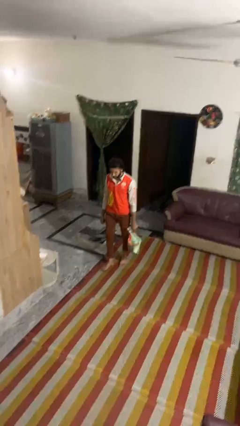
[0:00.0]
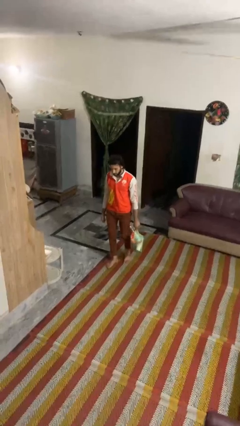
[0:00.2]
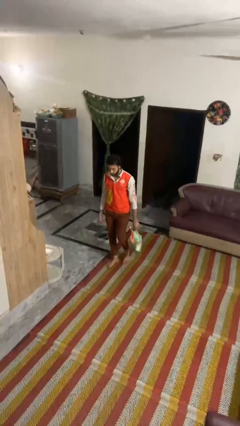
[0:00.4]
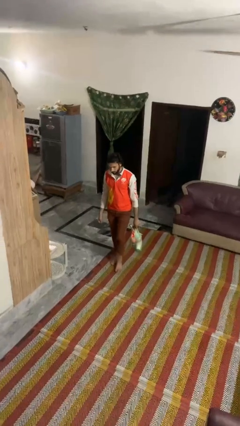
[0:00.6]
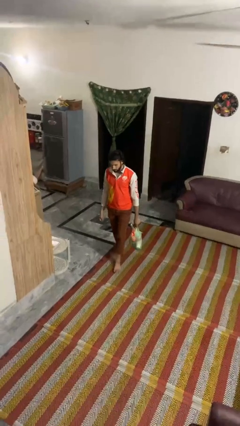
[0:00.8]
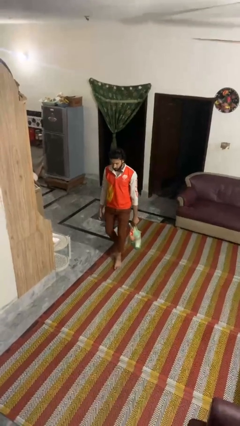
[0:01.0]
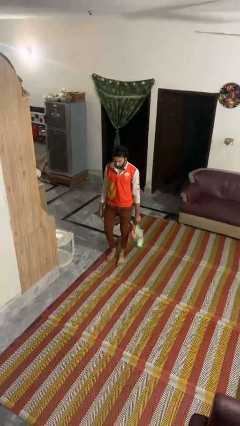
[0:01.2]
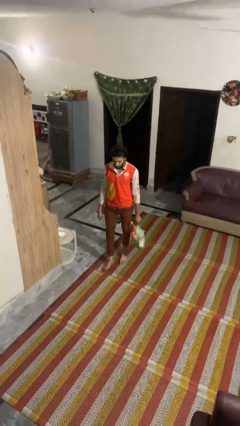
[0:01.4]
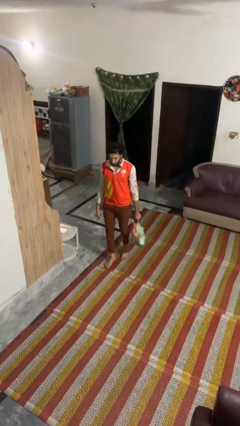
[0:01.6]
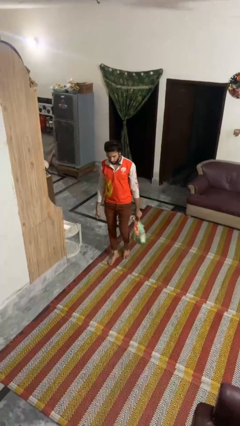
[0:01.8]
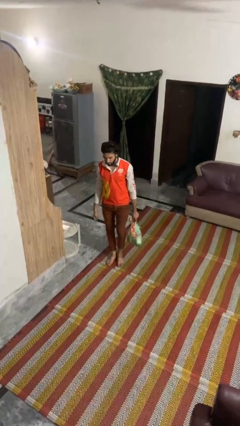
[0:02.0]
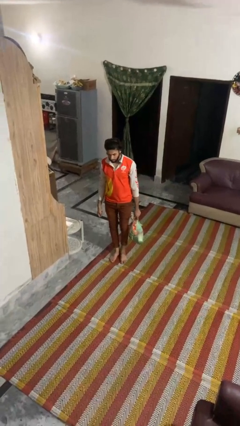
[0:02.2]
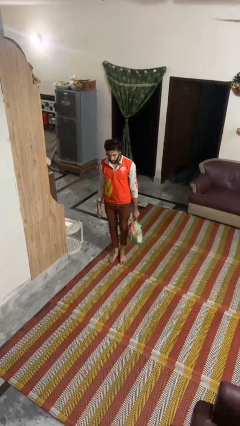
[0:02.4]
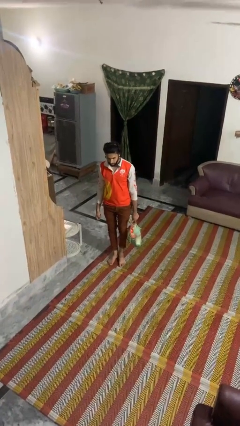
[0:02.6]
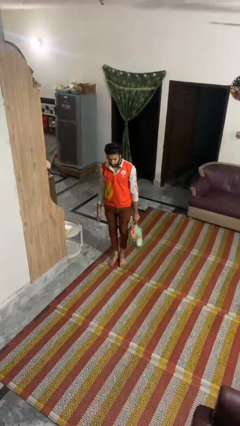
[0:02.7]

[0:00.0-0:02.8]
person carries groceries

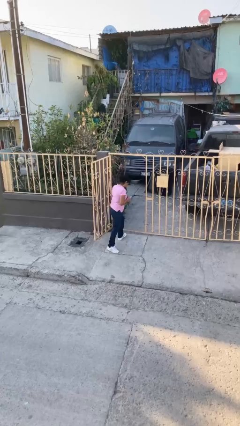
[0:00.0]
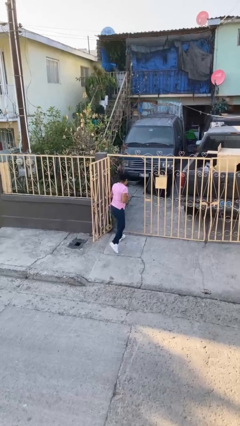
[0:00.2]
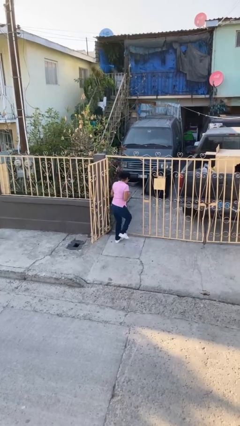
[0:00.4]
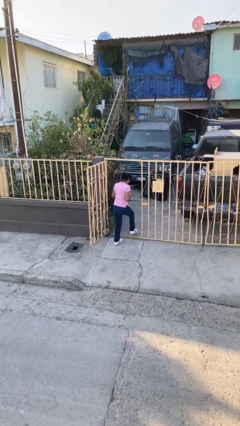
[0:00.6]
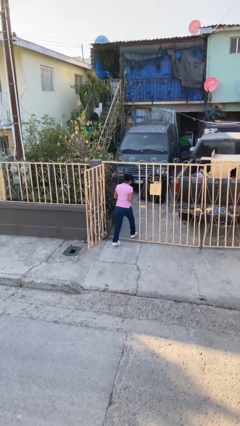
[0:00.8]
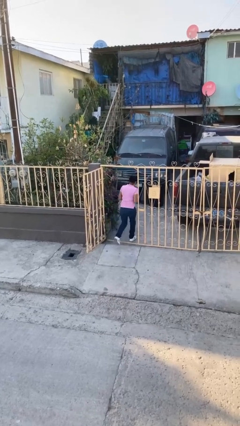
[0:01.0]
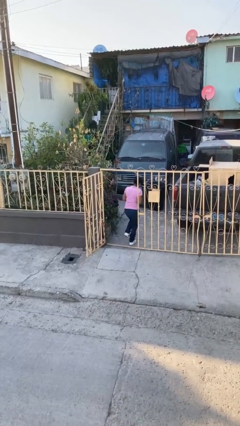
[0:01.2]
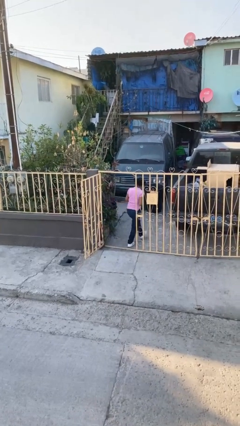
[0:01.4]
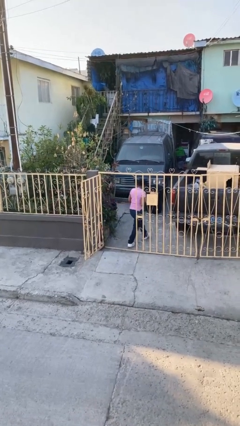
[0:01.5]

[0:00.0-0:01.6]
person exits scene through structure

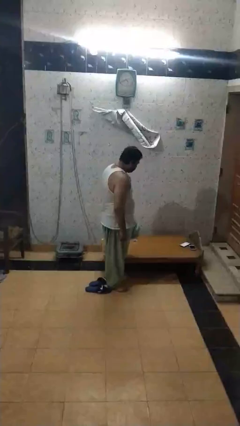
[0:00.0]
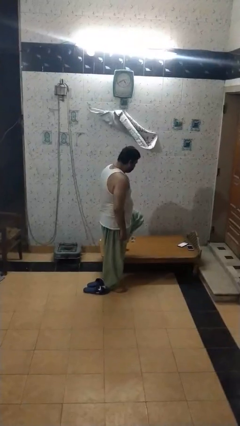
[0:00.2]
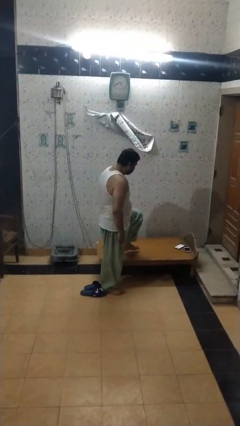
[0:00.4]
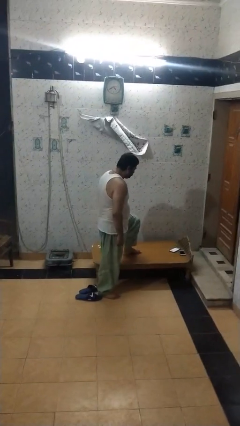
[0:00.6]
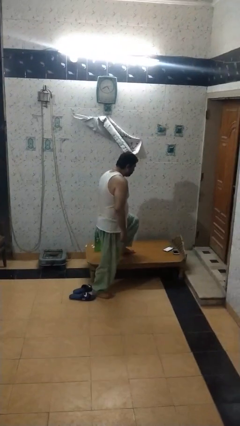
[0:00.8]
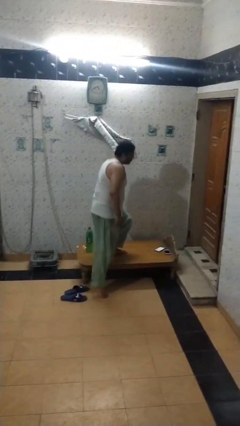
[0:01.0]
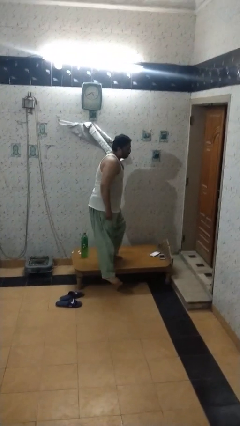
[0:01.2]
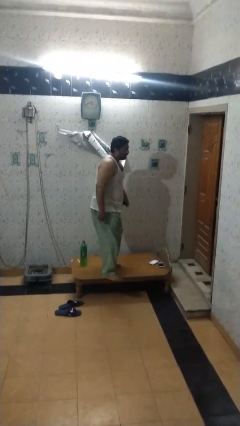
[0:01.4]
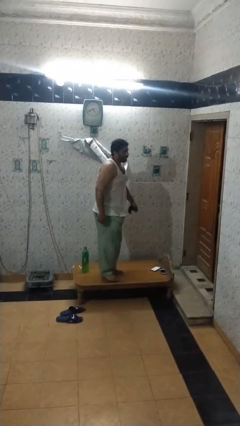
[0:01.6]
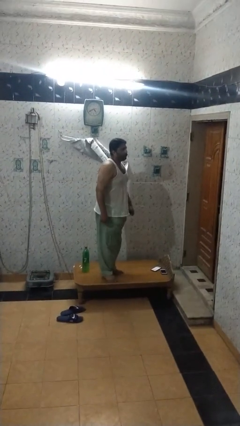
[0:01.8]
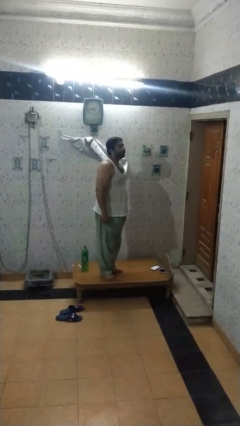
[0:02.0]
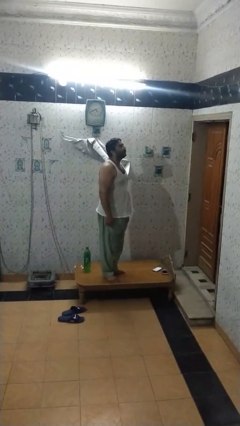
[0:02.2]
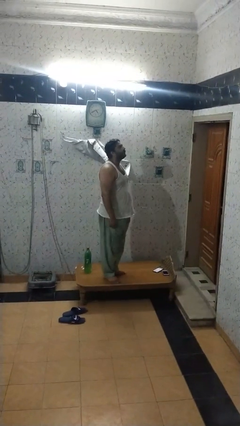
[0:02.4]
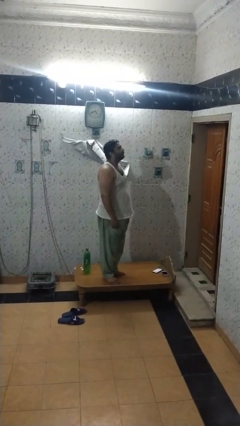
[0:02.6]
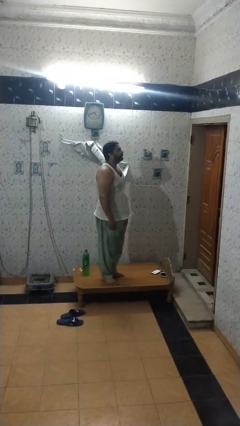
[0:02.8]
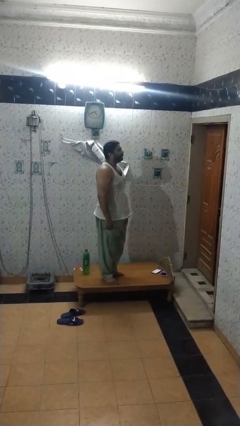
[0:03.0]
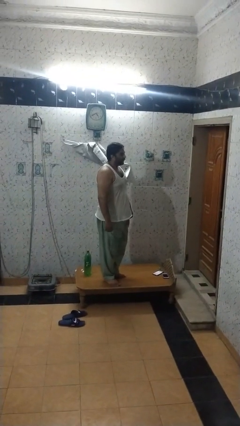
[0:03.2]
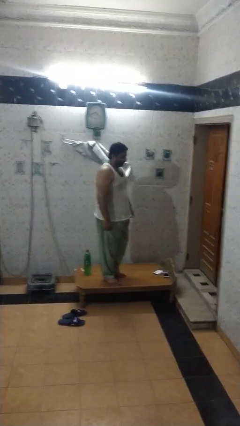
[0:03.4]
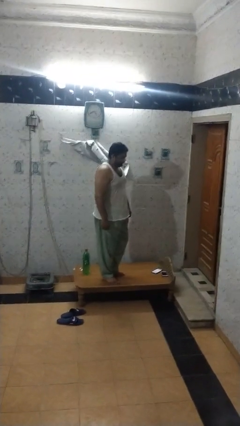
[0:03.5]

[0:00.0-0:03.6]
person climbs on table

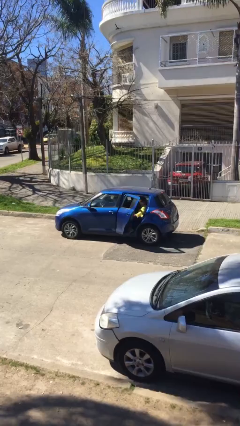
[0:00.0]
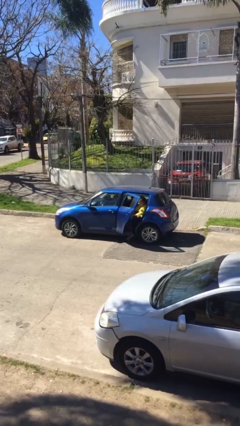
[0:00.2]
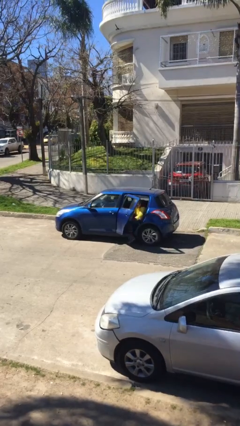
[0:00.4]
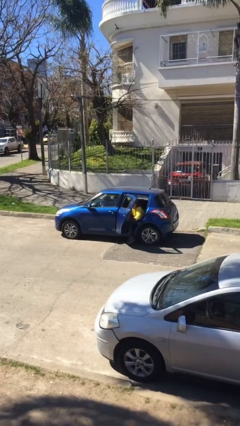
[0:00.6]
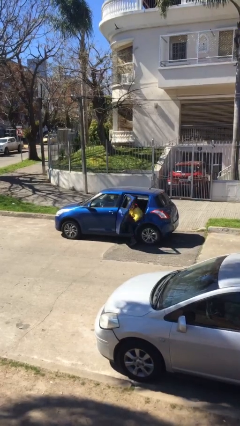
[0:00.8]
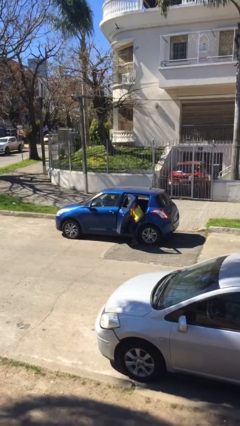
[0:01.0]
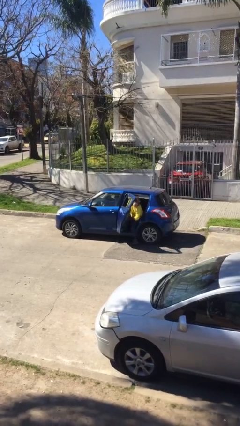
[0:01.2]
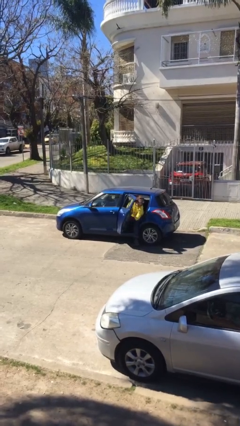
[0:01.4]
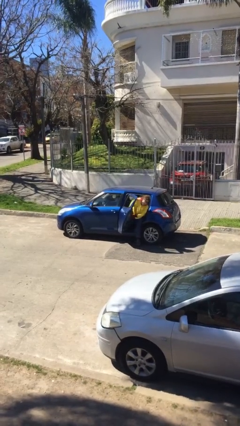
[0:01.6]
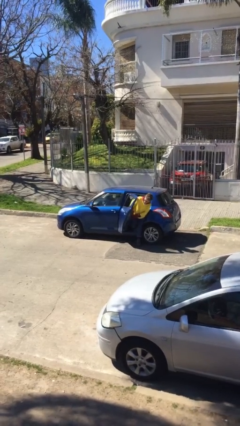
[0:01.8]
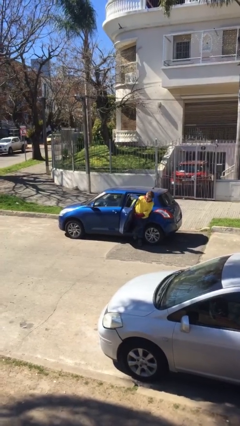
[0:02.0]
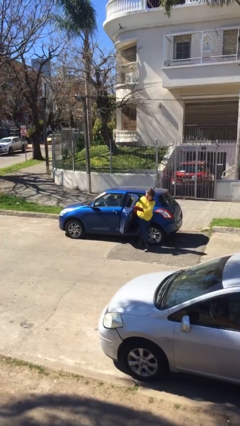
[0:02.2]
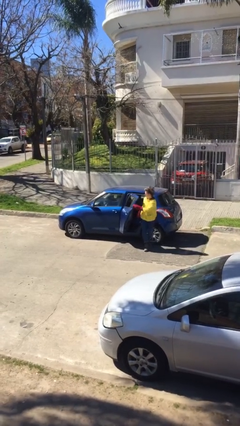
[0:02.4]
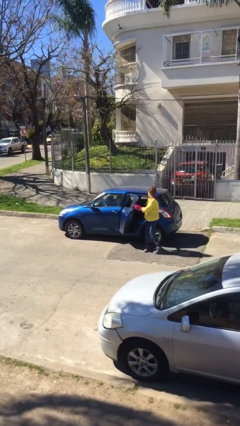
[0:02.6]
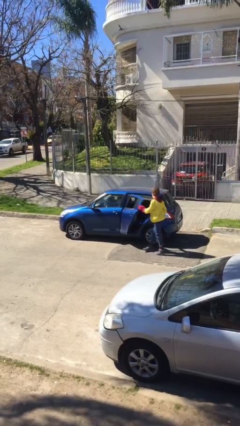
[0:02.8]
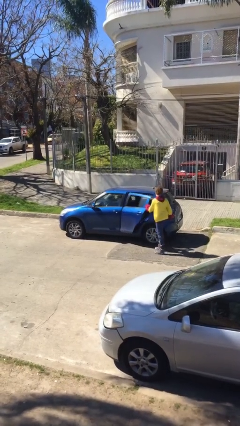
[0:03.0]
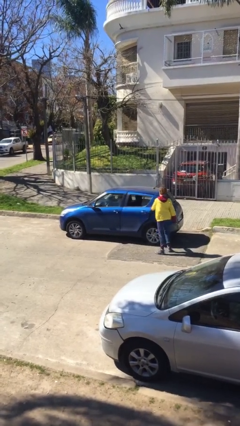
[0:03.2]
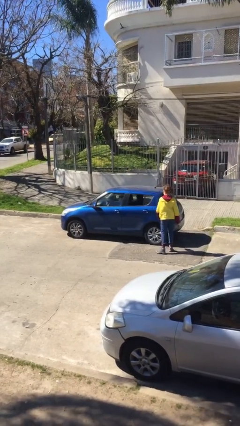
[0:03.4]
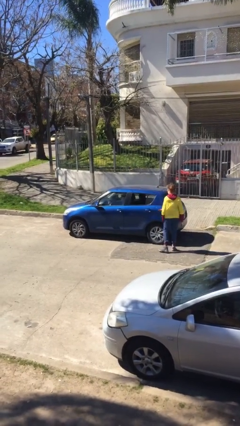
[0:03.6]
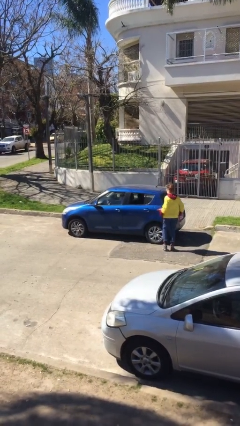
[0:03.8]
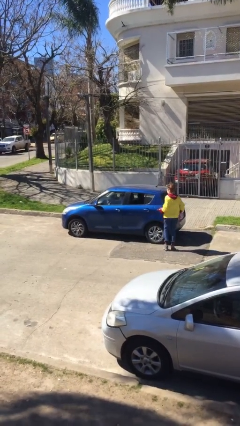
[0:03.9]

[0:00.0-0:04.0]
car drops off person

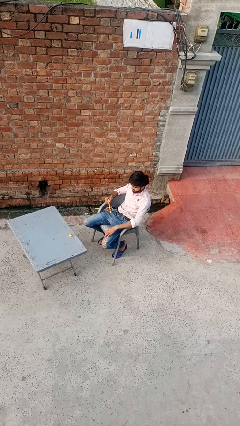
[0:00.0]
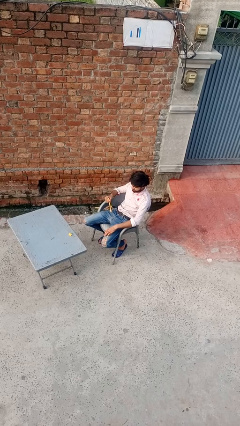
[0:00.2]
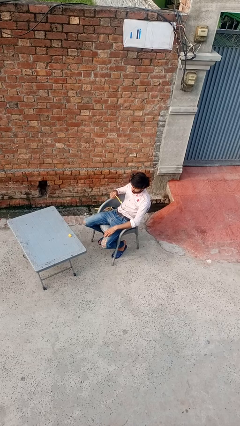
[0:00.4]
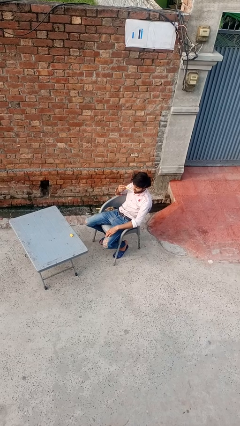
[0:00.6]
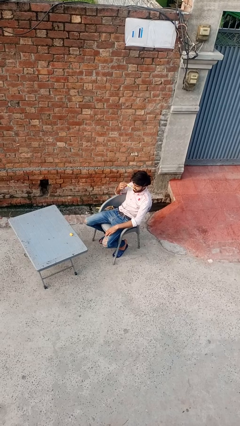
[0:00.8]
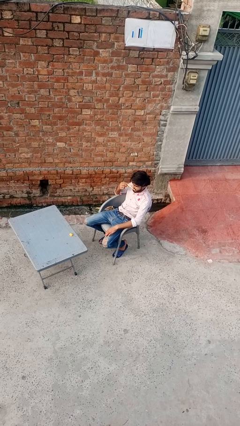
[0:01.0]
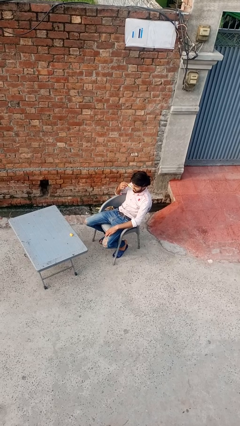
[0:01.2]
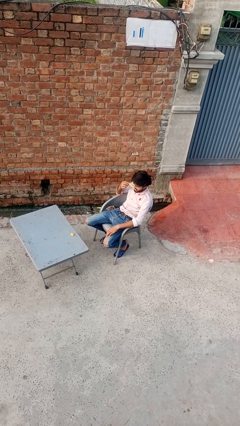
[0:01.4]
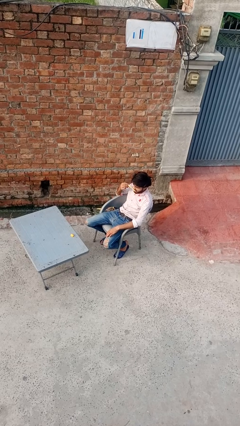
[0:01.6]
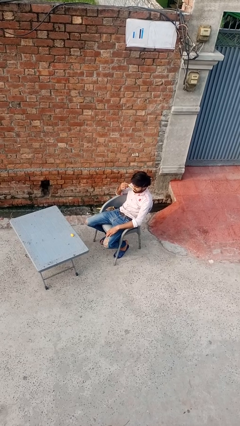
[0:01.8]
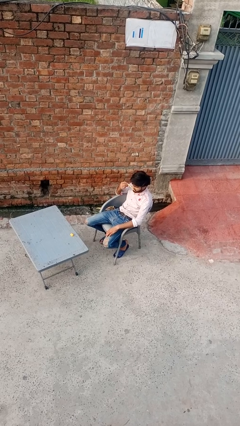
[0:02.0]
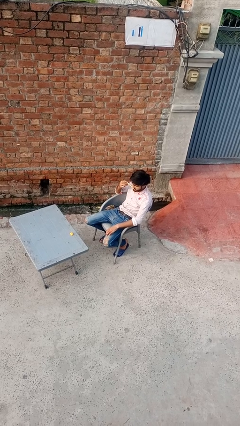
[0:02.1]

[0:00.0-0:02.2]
person brushes teeth

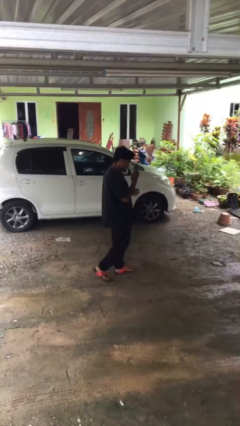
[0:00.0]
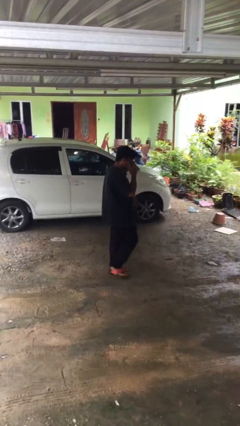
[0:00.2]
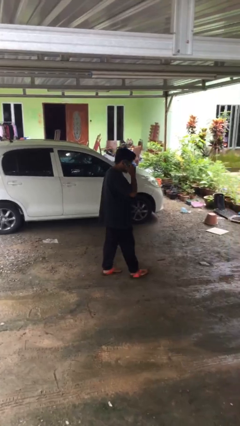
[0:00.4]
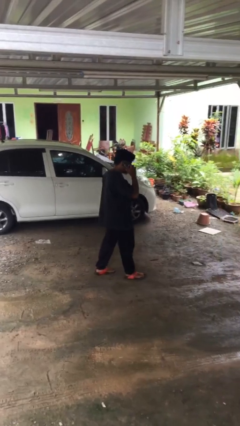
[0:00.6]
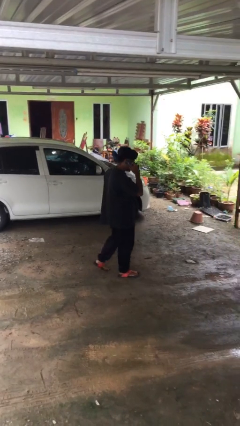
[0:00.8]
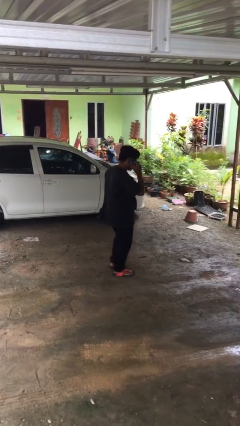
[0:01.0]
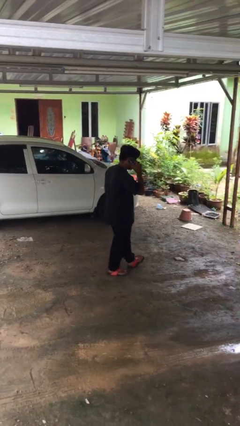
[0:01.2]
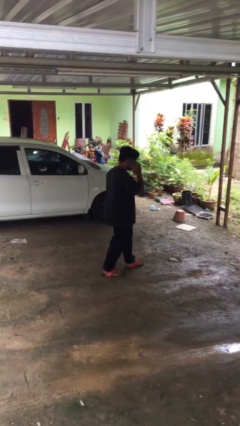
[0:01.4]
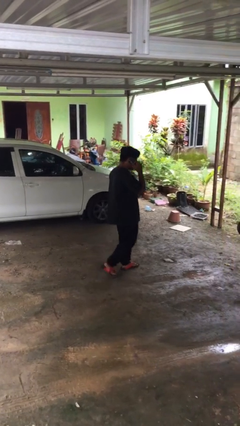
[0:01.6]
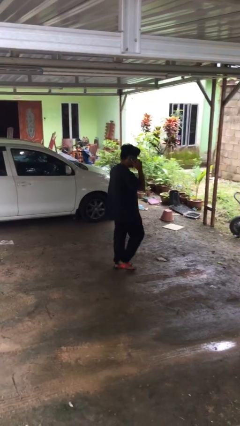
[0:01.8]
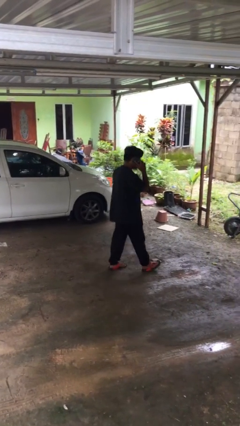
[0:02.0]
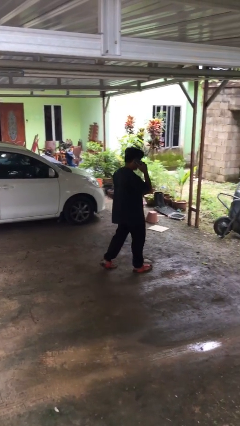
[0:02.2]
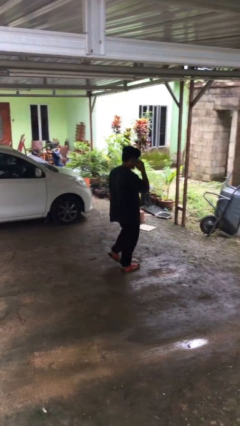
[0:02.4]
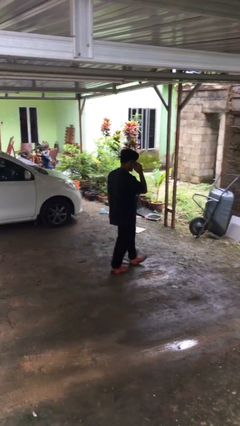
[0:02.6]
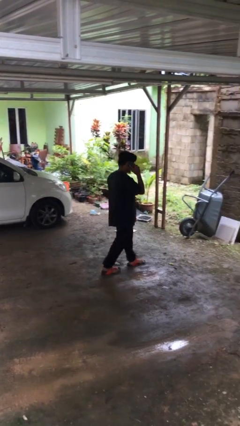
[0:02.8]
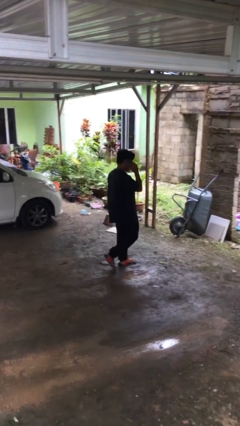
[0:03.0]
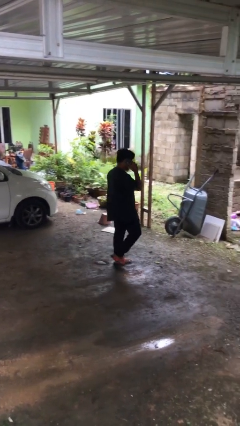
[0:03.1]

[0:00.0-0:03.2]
person talks on phone
